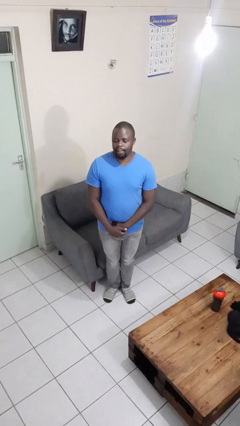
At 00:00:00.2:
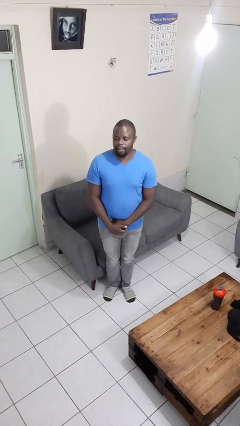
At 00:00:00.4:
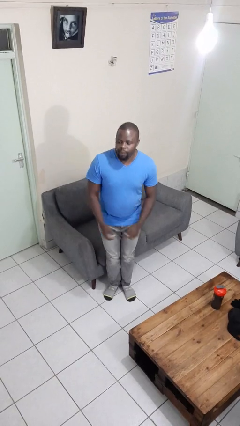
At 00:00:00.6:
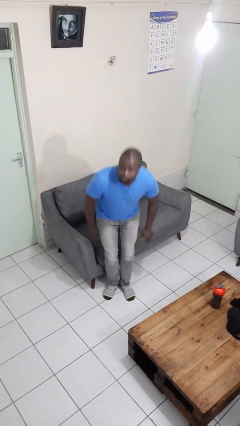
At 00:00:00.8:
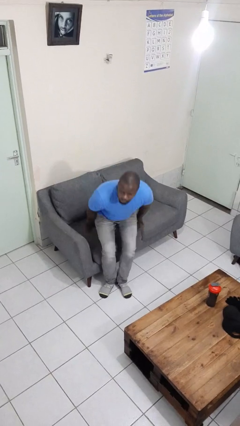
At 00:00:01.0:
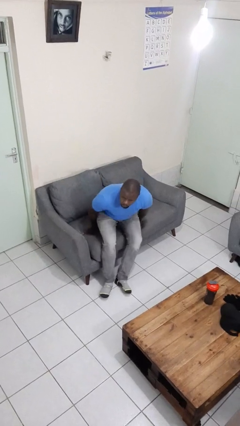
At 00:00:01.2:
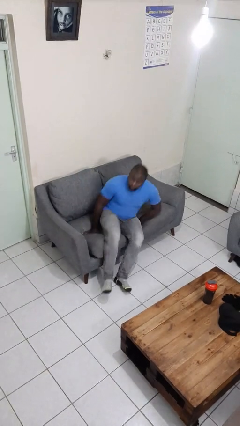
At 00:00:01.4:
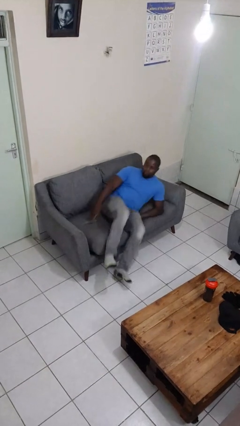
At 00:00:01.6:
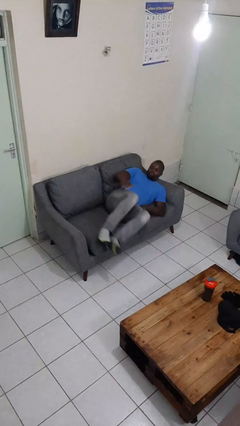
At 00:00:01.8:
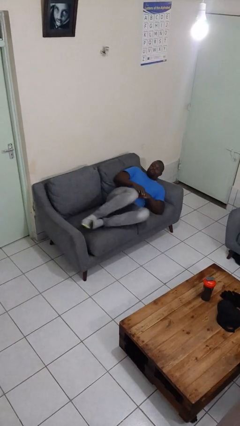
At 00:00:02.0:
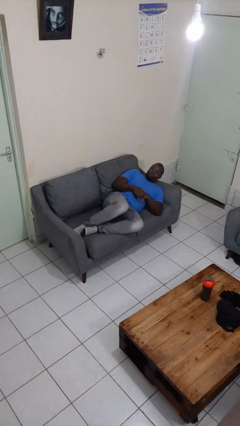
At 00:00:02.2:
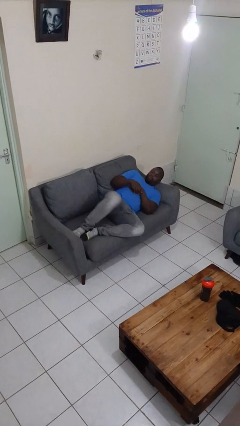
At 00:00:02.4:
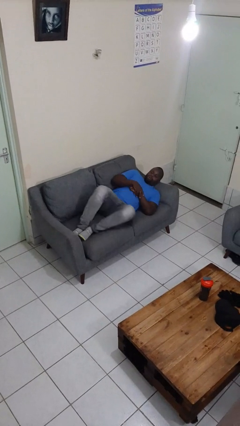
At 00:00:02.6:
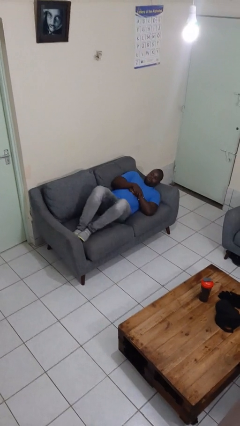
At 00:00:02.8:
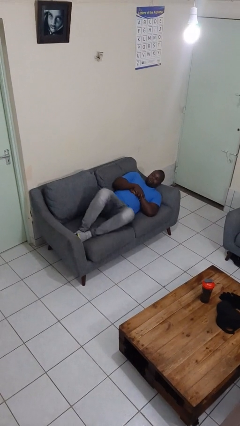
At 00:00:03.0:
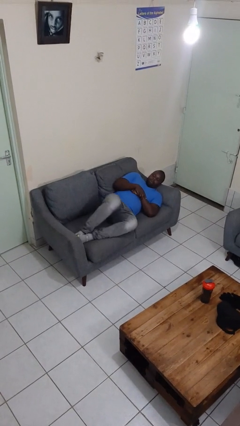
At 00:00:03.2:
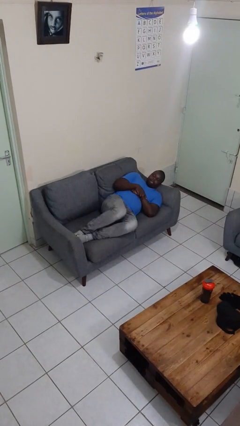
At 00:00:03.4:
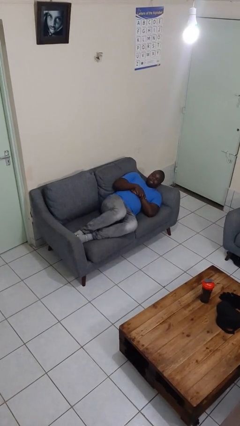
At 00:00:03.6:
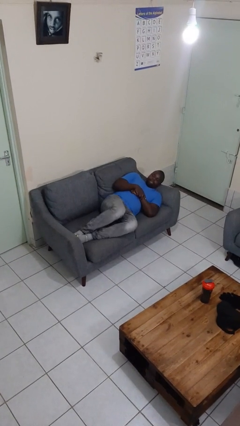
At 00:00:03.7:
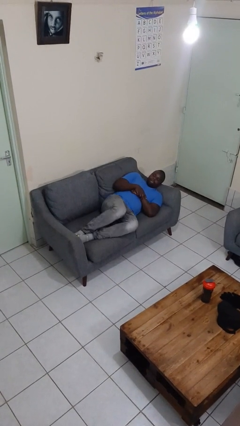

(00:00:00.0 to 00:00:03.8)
person lies down on couch

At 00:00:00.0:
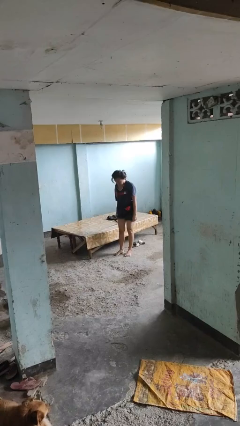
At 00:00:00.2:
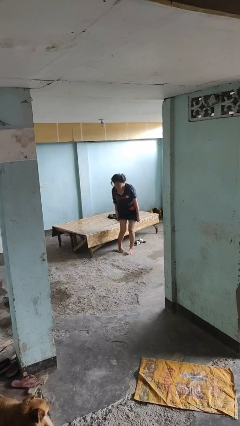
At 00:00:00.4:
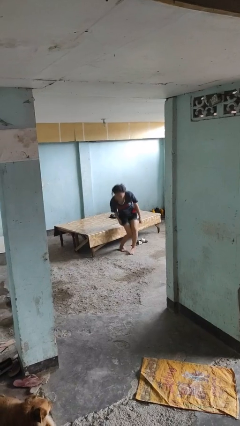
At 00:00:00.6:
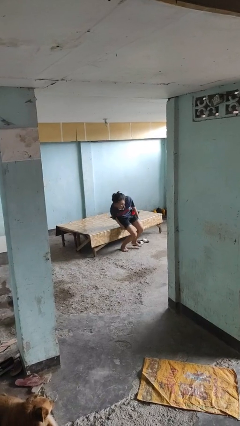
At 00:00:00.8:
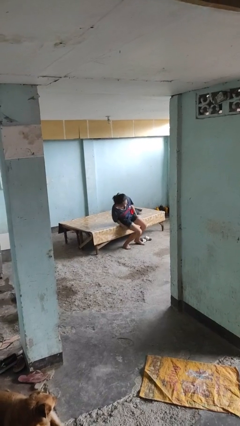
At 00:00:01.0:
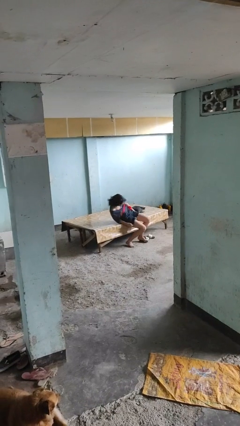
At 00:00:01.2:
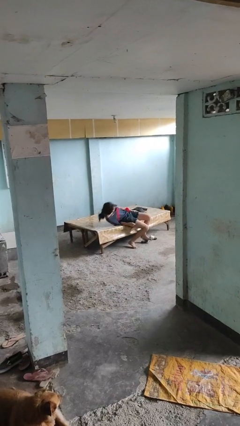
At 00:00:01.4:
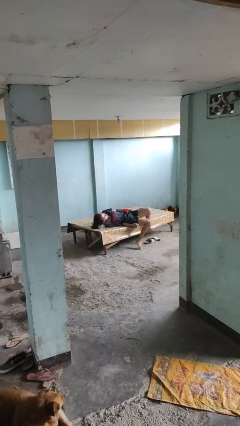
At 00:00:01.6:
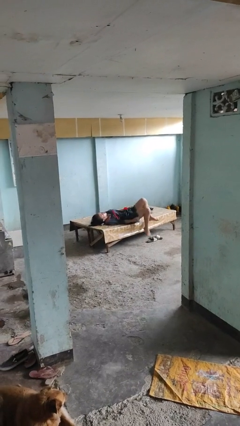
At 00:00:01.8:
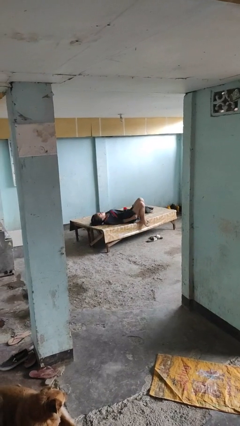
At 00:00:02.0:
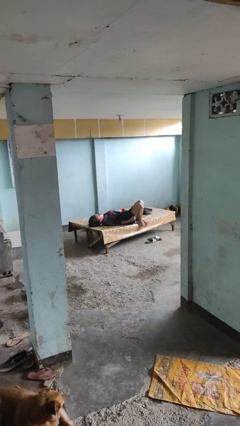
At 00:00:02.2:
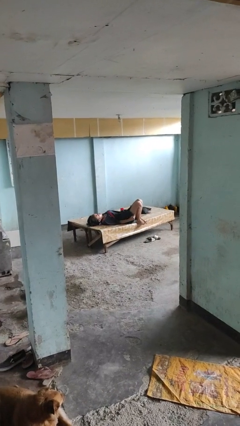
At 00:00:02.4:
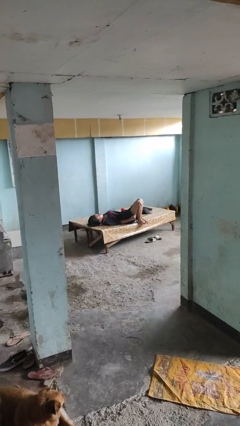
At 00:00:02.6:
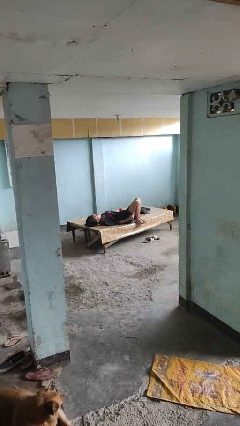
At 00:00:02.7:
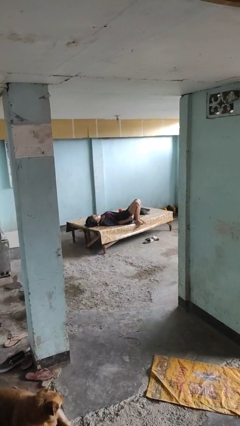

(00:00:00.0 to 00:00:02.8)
person lies down on bed

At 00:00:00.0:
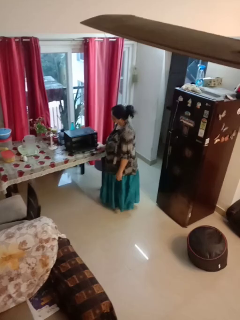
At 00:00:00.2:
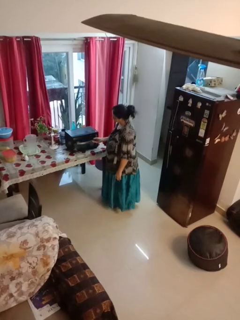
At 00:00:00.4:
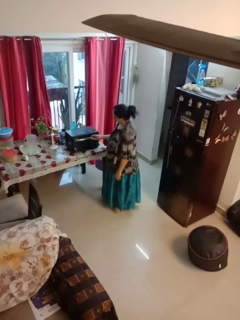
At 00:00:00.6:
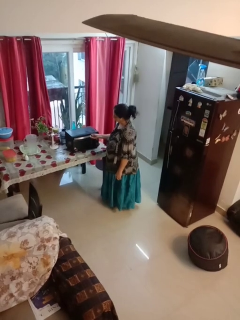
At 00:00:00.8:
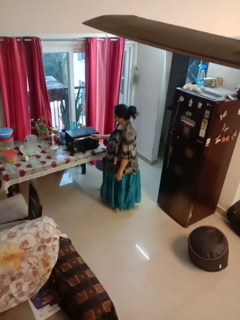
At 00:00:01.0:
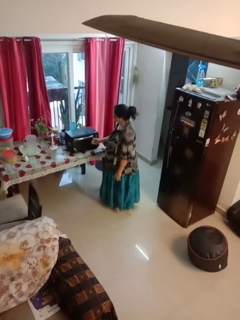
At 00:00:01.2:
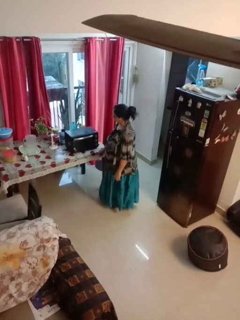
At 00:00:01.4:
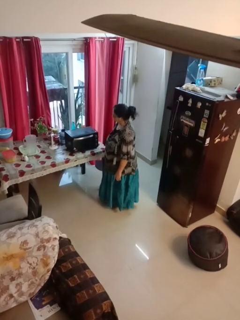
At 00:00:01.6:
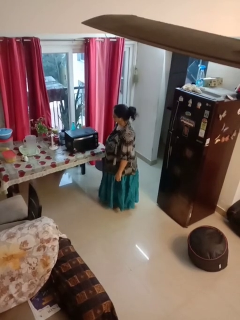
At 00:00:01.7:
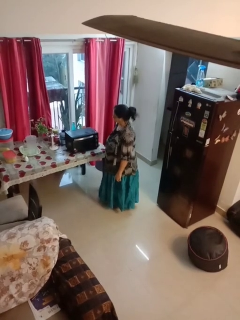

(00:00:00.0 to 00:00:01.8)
person closes microwave

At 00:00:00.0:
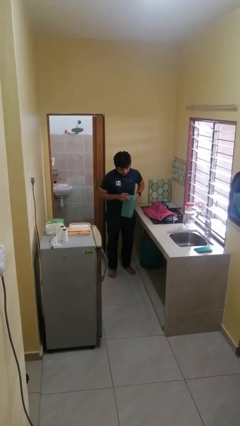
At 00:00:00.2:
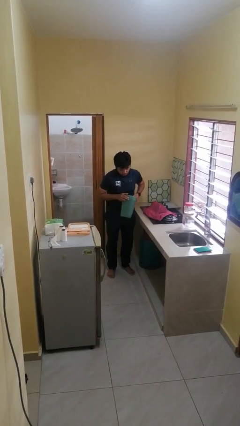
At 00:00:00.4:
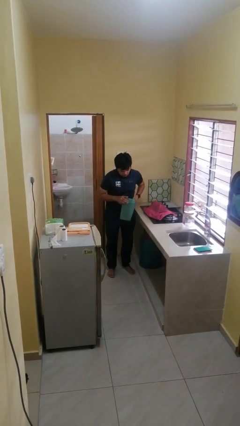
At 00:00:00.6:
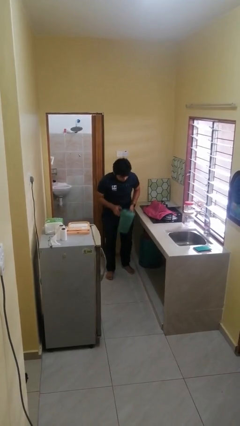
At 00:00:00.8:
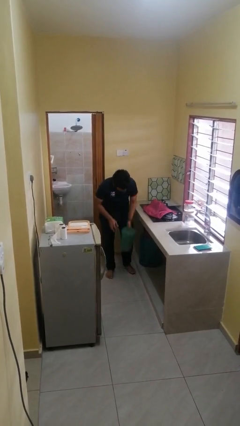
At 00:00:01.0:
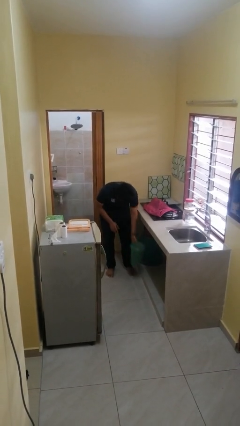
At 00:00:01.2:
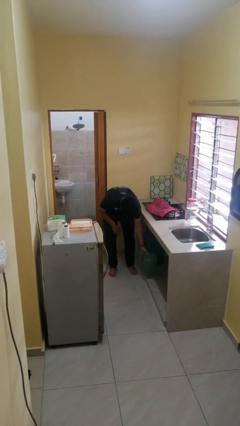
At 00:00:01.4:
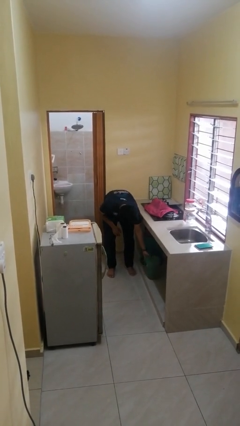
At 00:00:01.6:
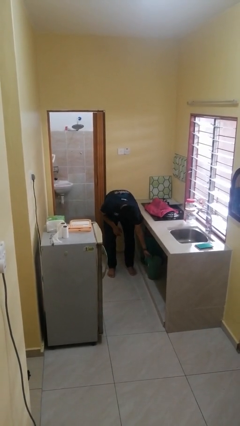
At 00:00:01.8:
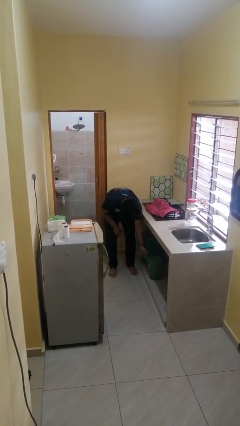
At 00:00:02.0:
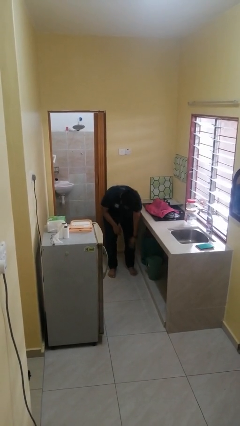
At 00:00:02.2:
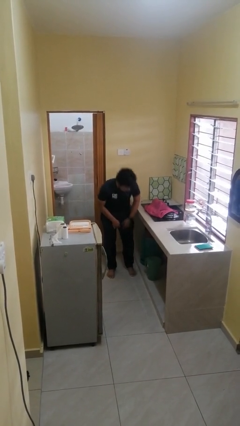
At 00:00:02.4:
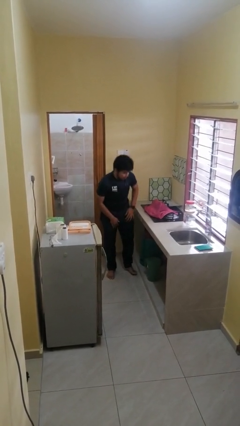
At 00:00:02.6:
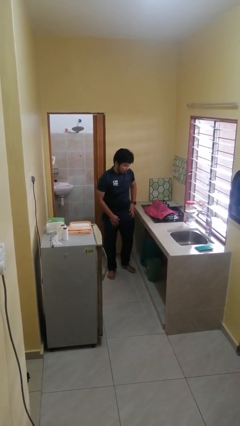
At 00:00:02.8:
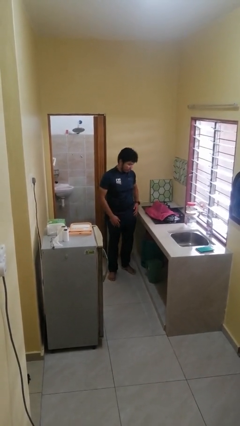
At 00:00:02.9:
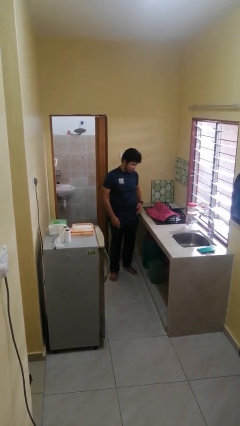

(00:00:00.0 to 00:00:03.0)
person puts down object into cabinet

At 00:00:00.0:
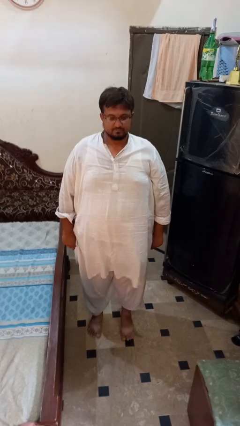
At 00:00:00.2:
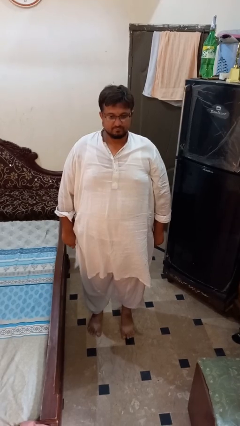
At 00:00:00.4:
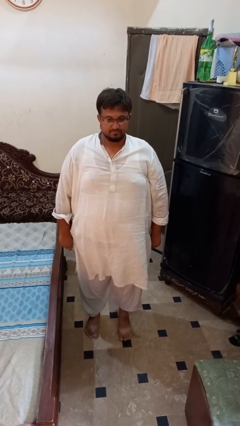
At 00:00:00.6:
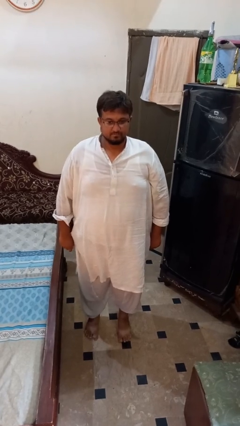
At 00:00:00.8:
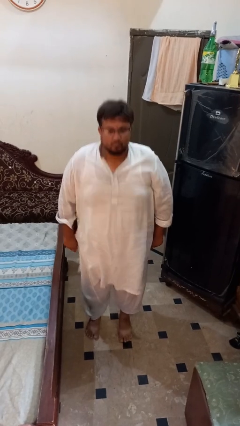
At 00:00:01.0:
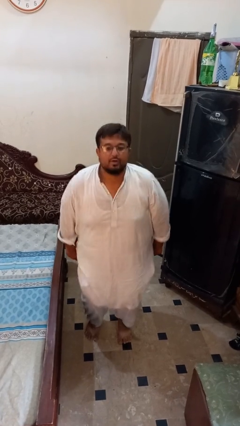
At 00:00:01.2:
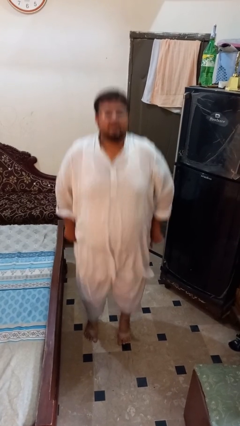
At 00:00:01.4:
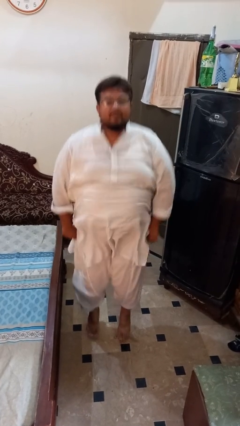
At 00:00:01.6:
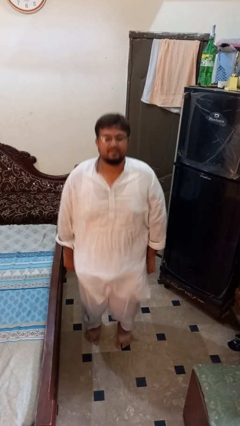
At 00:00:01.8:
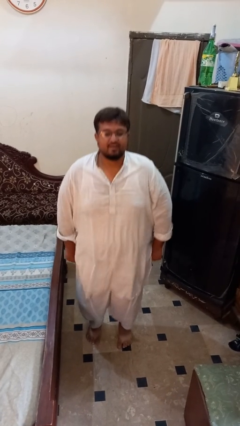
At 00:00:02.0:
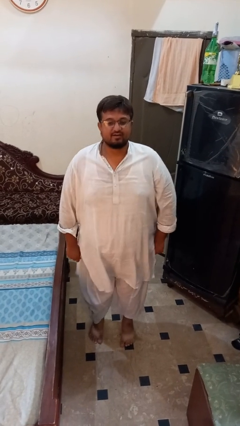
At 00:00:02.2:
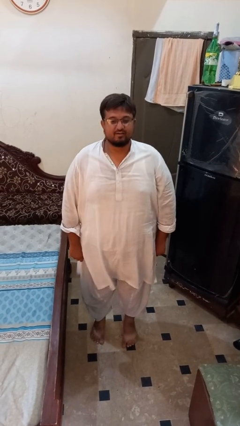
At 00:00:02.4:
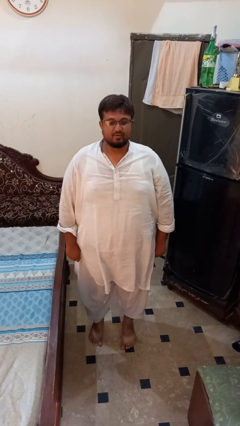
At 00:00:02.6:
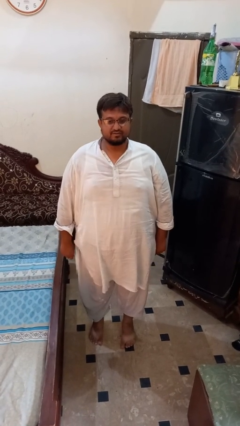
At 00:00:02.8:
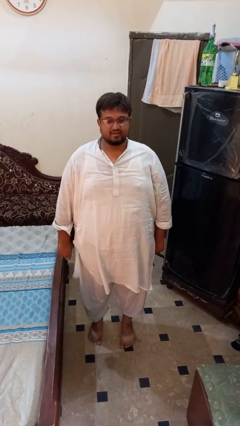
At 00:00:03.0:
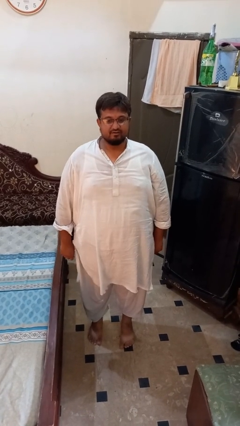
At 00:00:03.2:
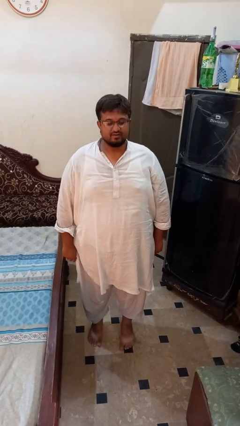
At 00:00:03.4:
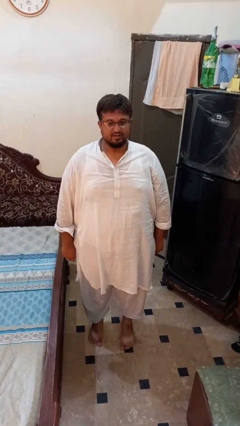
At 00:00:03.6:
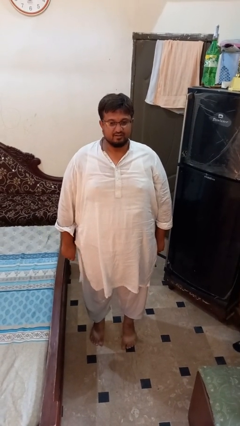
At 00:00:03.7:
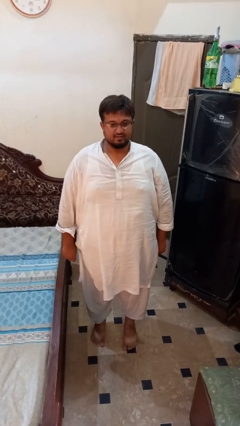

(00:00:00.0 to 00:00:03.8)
person jumps

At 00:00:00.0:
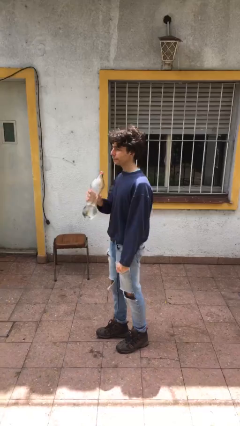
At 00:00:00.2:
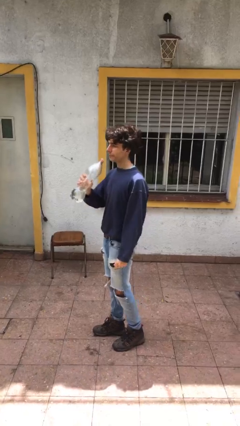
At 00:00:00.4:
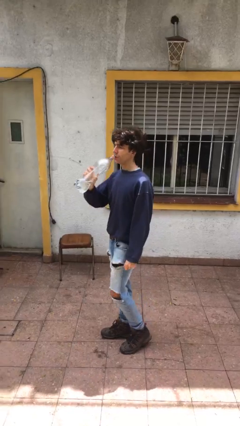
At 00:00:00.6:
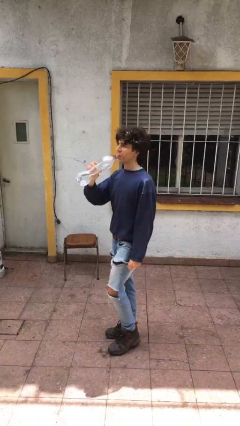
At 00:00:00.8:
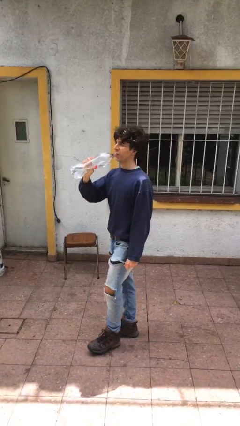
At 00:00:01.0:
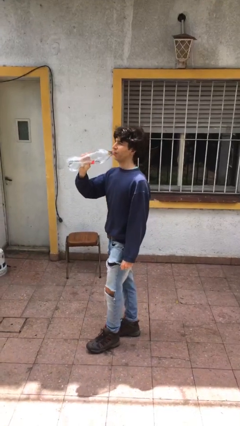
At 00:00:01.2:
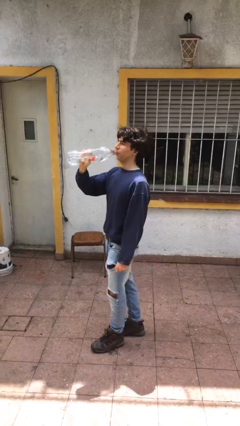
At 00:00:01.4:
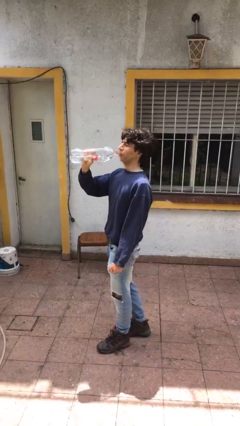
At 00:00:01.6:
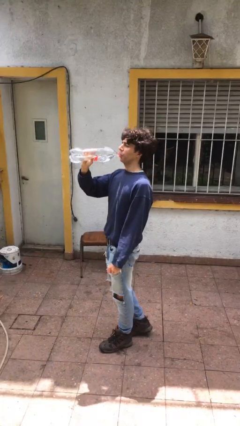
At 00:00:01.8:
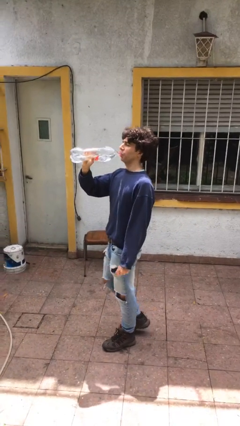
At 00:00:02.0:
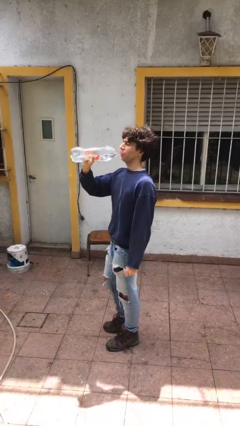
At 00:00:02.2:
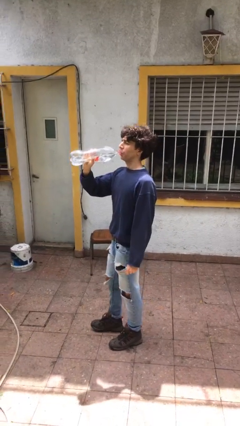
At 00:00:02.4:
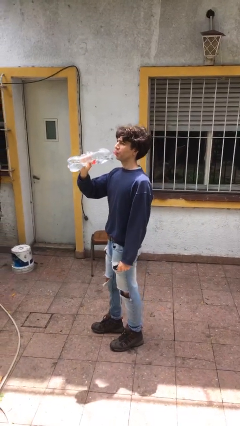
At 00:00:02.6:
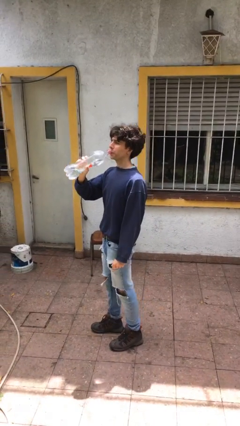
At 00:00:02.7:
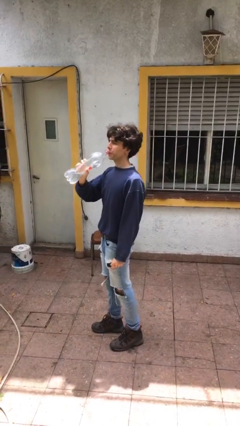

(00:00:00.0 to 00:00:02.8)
person drinks from bottle
